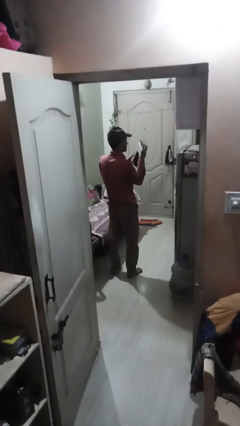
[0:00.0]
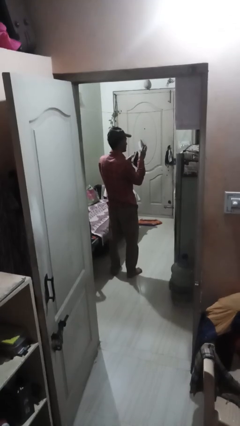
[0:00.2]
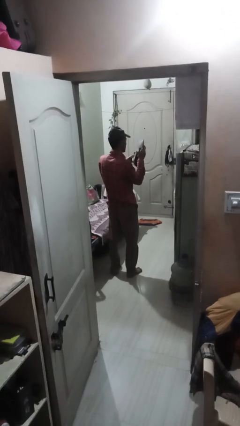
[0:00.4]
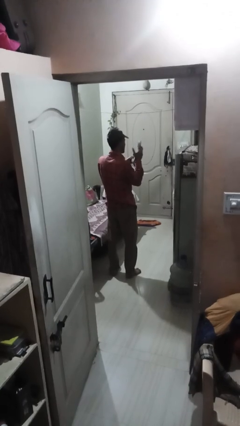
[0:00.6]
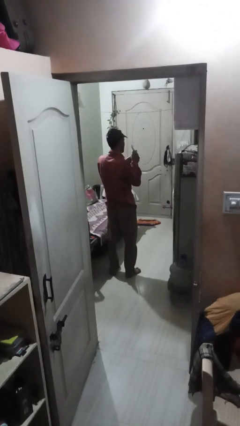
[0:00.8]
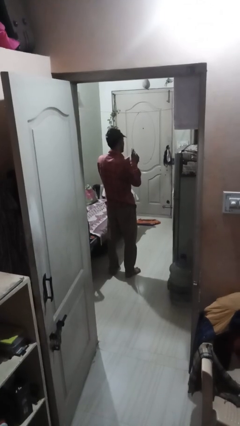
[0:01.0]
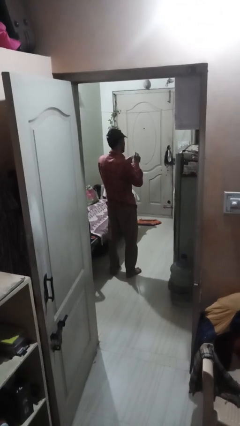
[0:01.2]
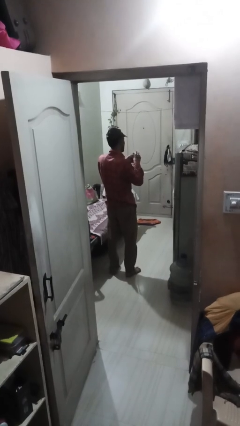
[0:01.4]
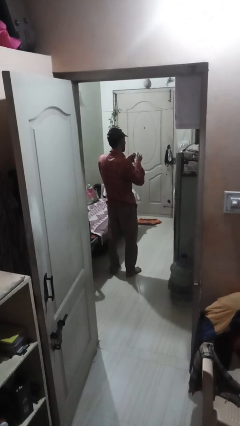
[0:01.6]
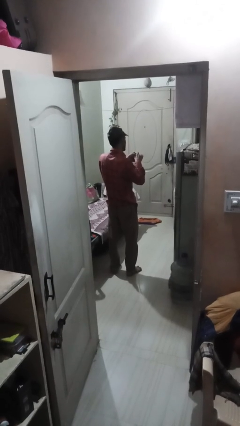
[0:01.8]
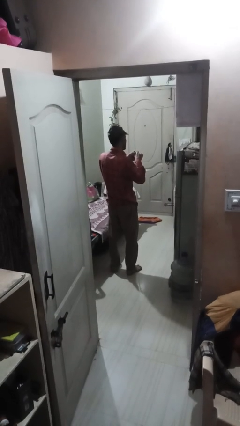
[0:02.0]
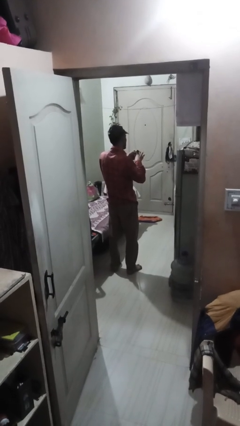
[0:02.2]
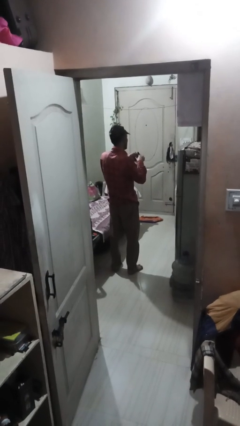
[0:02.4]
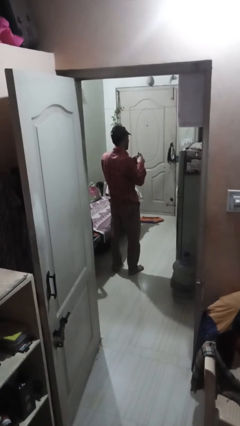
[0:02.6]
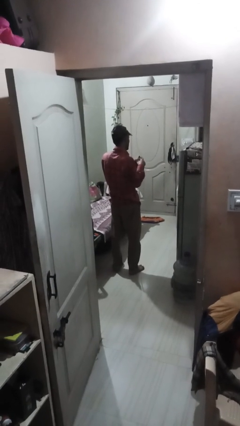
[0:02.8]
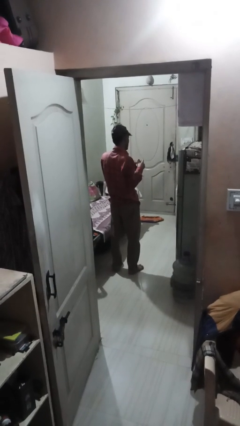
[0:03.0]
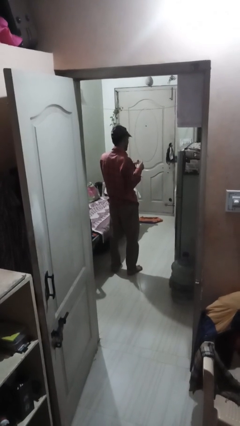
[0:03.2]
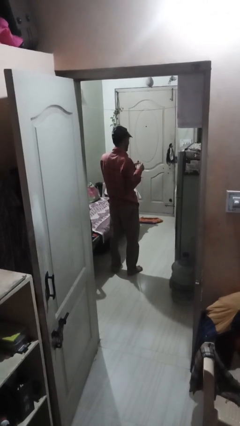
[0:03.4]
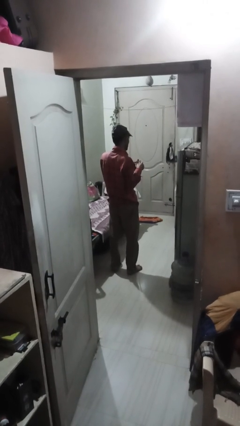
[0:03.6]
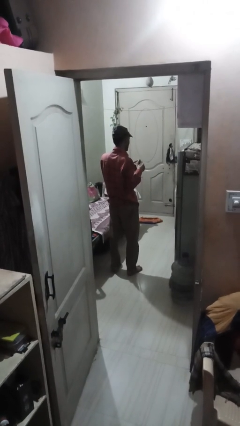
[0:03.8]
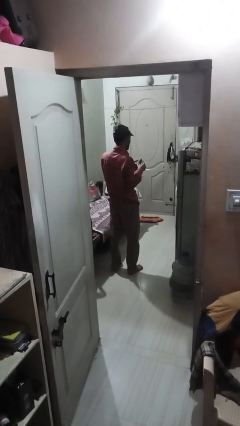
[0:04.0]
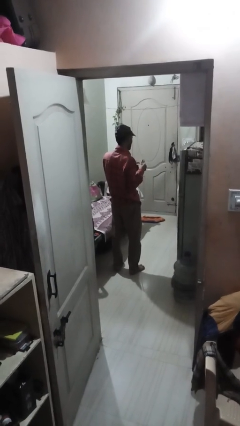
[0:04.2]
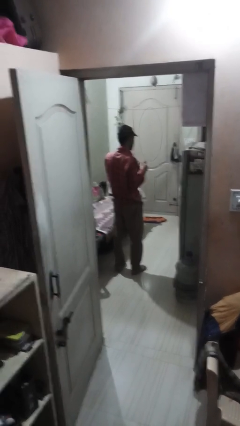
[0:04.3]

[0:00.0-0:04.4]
person puts object into purse

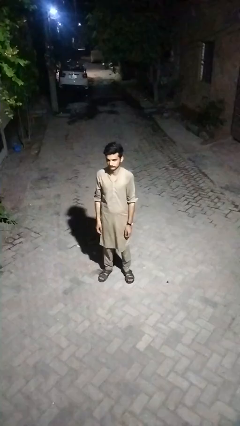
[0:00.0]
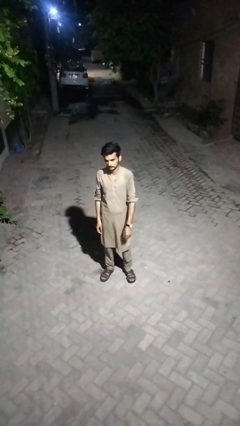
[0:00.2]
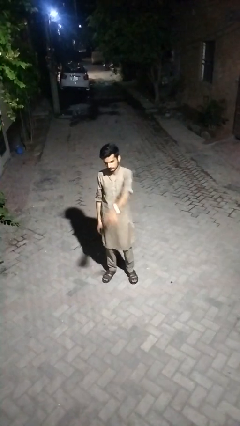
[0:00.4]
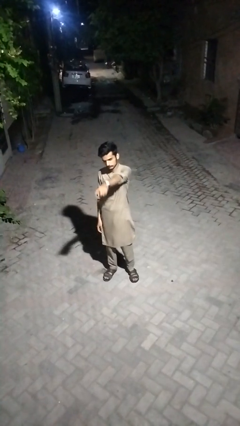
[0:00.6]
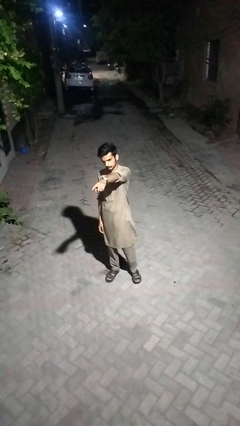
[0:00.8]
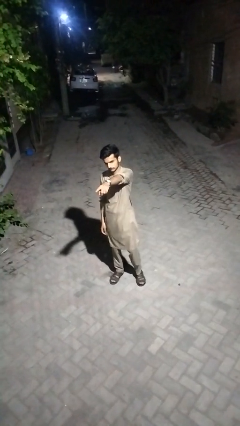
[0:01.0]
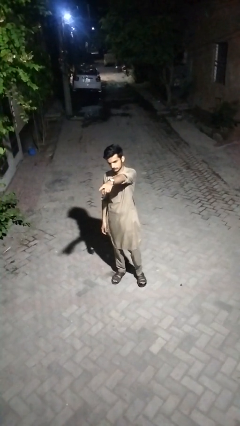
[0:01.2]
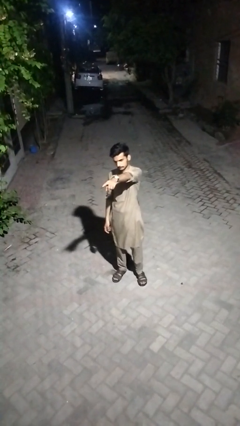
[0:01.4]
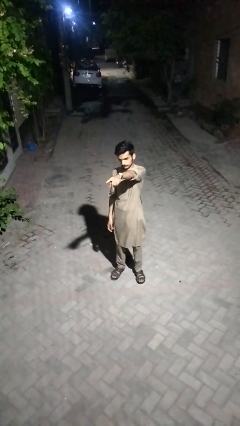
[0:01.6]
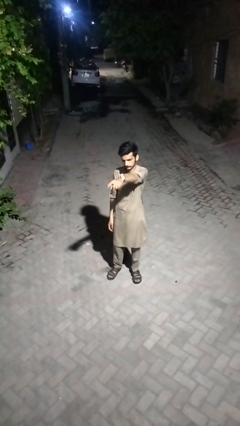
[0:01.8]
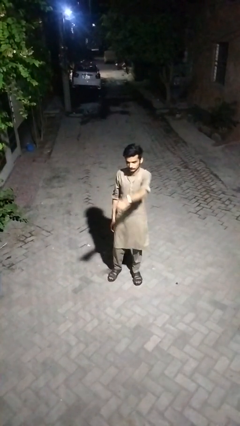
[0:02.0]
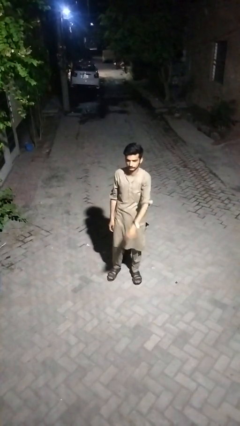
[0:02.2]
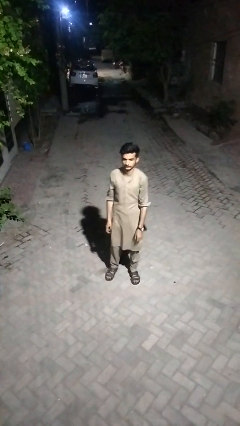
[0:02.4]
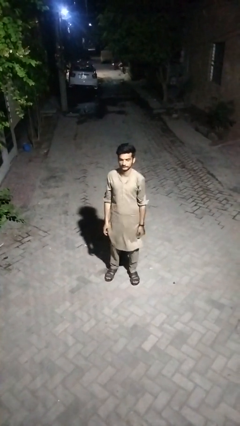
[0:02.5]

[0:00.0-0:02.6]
person points at person

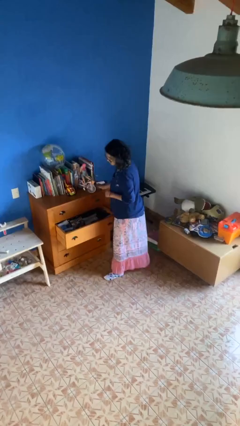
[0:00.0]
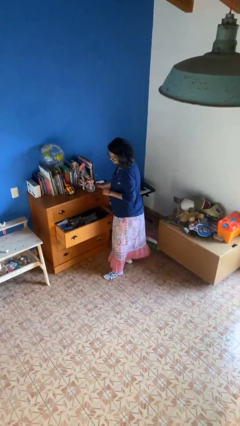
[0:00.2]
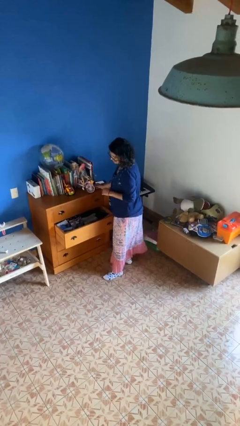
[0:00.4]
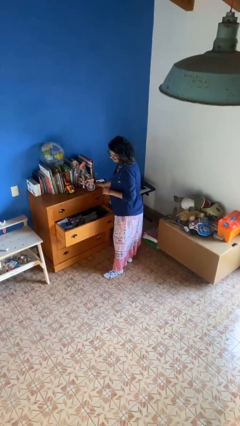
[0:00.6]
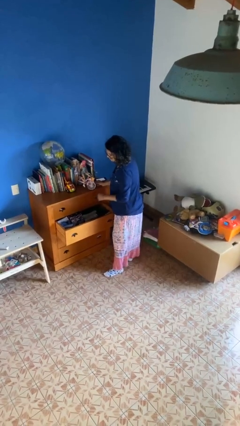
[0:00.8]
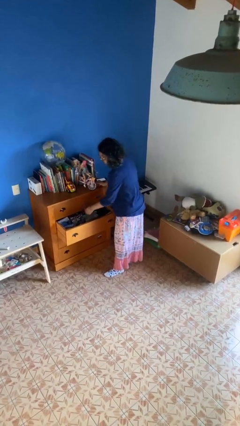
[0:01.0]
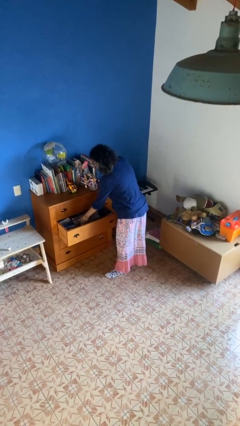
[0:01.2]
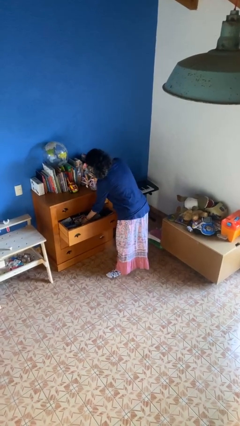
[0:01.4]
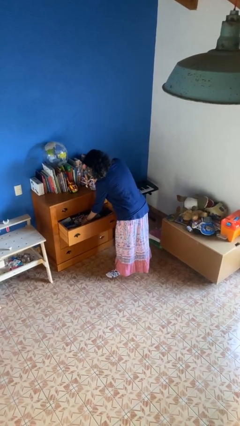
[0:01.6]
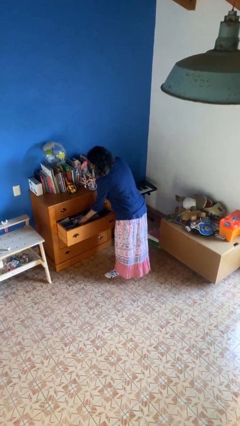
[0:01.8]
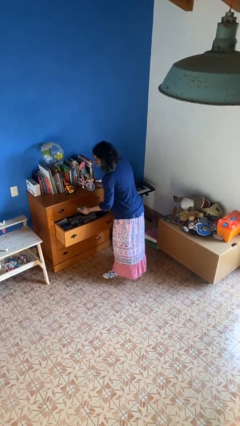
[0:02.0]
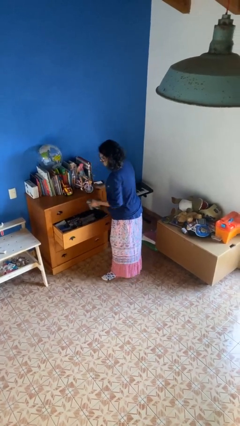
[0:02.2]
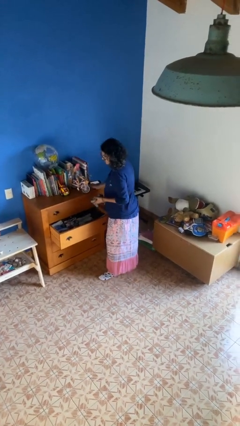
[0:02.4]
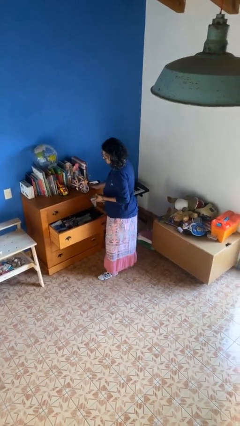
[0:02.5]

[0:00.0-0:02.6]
person takes clothes from dresser

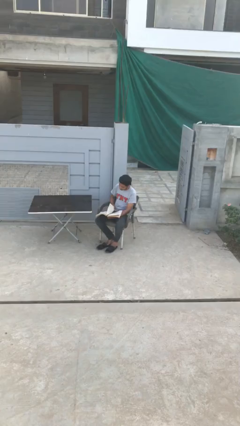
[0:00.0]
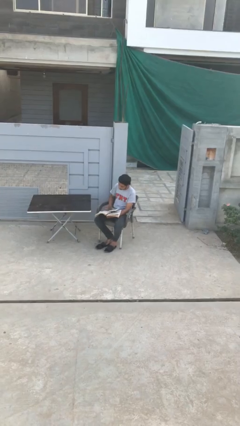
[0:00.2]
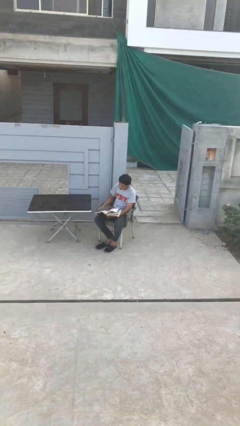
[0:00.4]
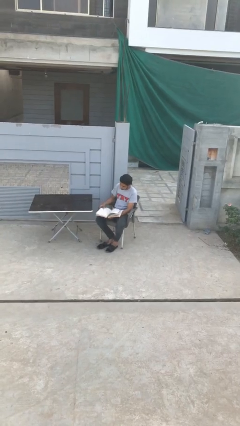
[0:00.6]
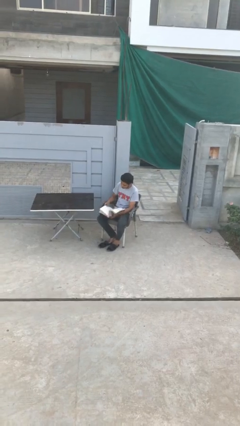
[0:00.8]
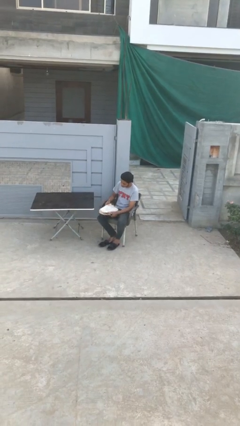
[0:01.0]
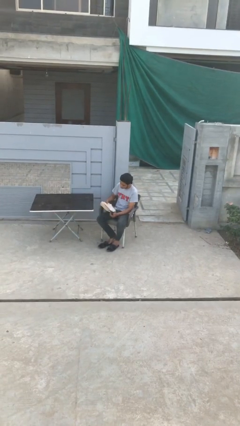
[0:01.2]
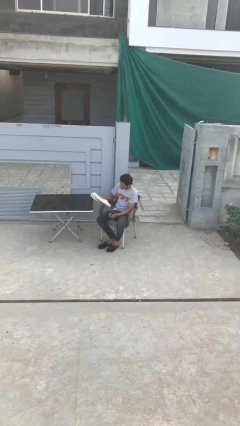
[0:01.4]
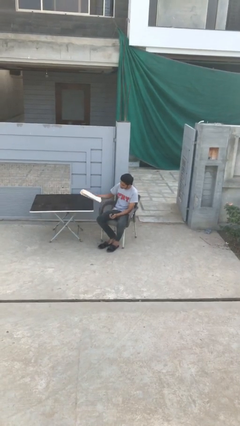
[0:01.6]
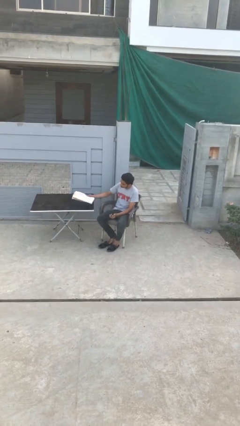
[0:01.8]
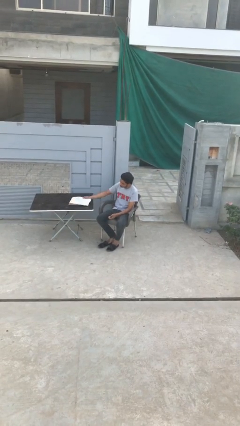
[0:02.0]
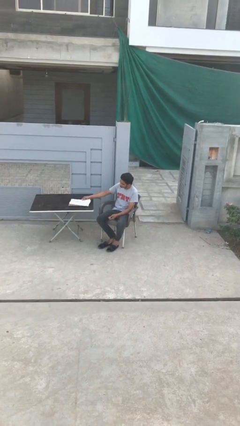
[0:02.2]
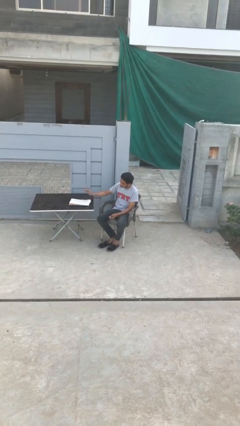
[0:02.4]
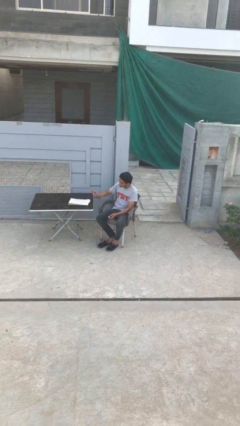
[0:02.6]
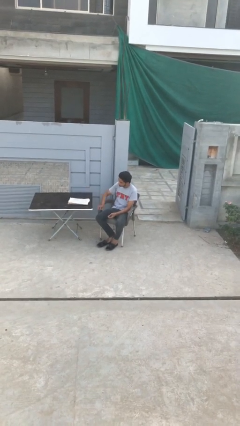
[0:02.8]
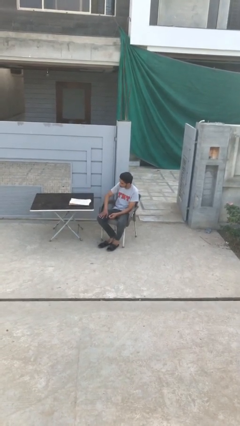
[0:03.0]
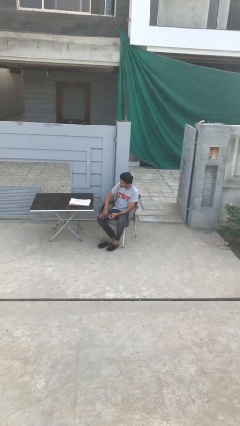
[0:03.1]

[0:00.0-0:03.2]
person puts down object on table

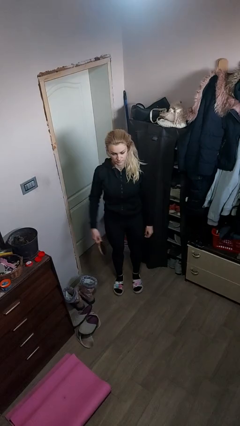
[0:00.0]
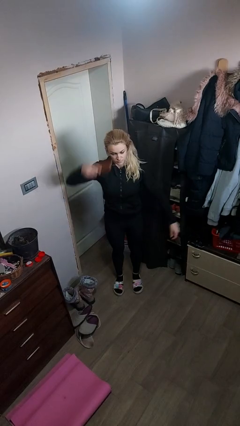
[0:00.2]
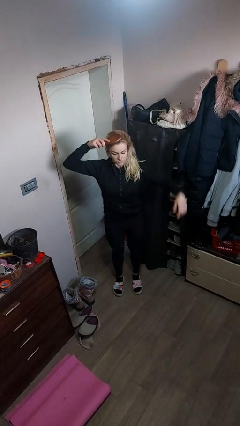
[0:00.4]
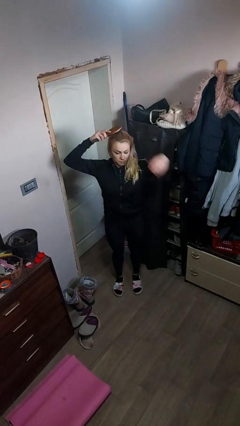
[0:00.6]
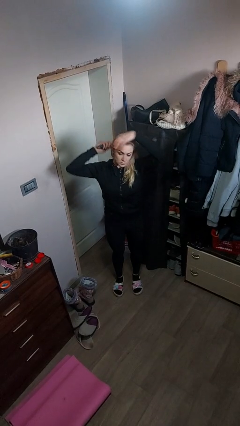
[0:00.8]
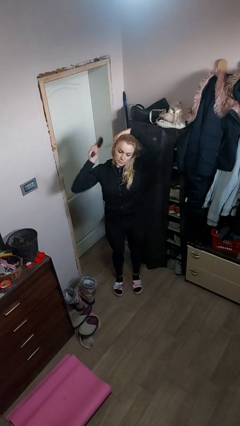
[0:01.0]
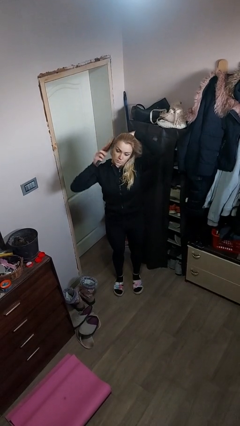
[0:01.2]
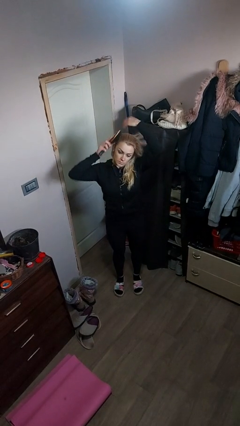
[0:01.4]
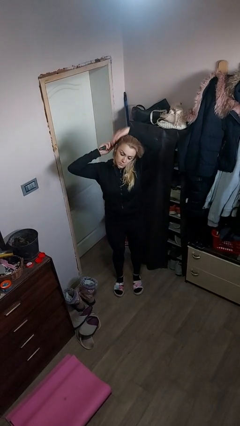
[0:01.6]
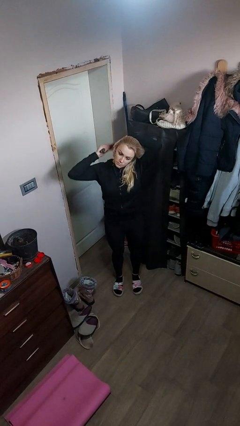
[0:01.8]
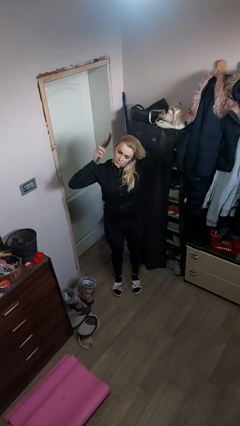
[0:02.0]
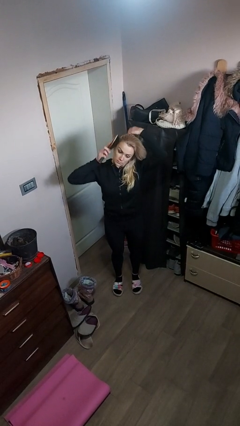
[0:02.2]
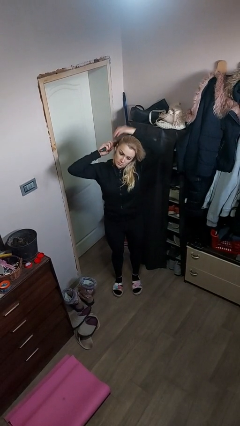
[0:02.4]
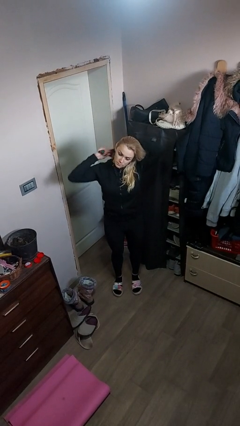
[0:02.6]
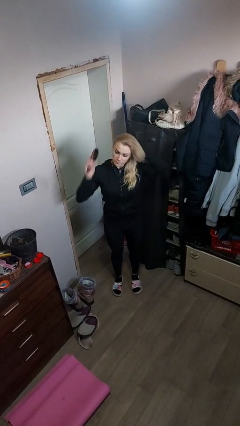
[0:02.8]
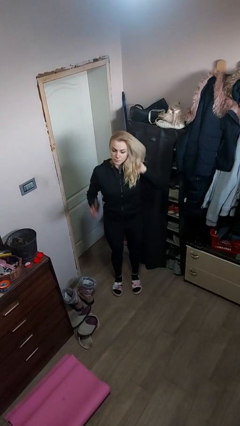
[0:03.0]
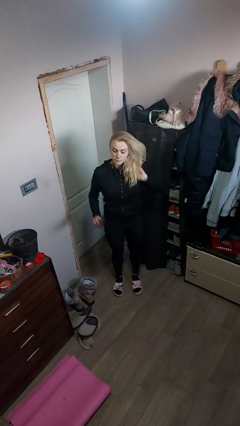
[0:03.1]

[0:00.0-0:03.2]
person brushes hair

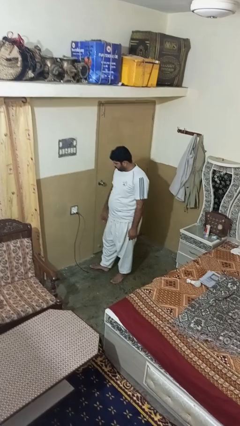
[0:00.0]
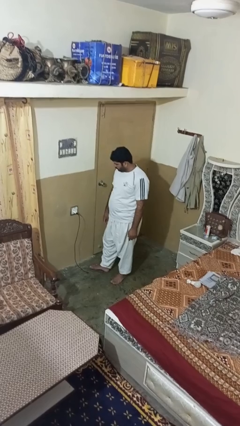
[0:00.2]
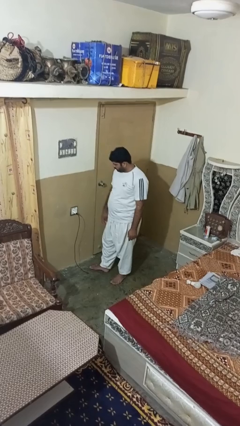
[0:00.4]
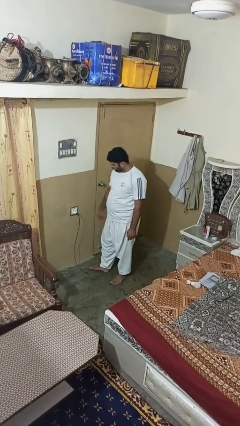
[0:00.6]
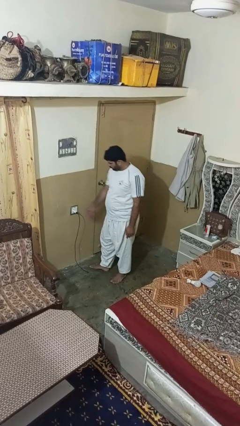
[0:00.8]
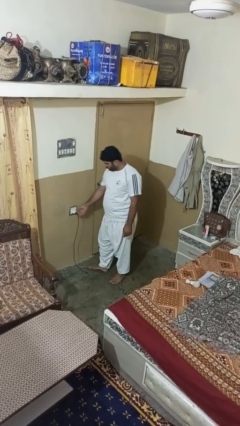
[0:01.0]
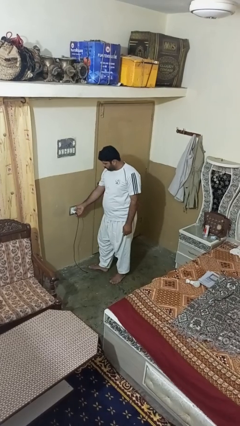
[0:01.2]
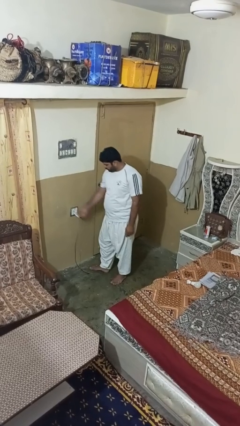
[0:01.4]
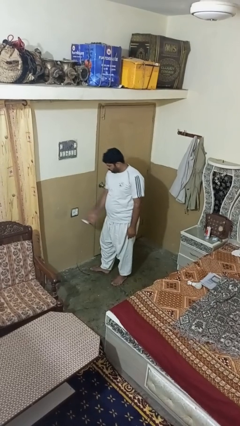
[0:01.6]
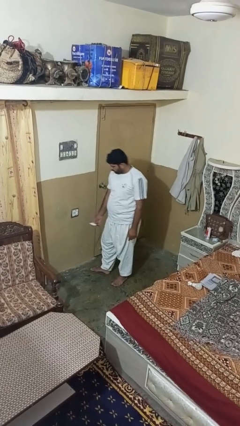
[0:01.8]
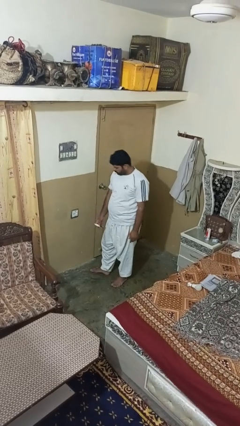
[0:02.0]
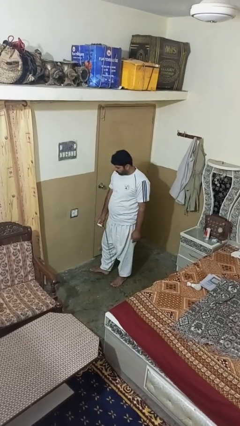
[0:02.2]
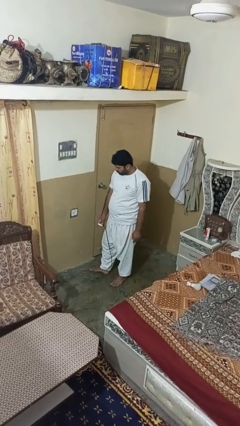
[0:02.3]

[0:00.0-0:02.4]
person unplugs from electrical socket
